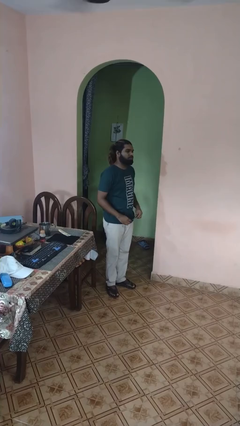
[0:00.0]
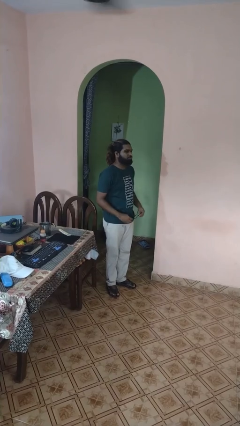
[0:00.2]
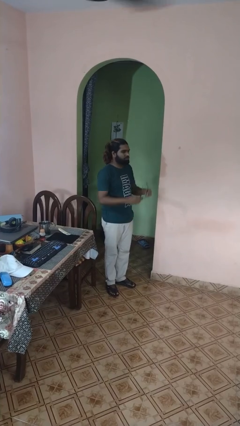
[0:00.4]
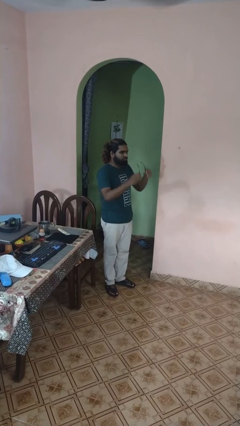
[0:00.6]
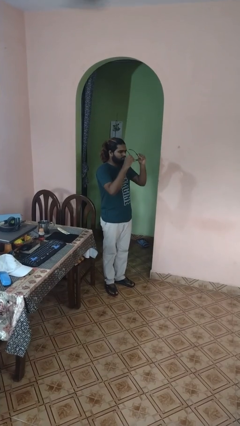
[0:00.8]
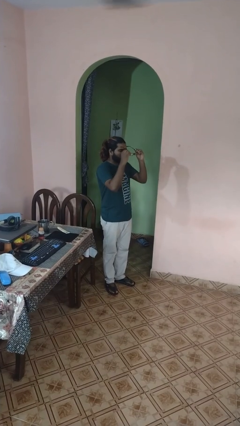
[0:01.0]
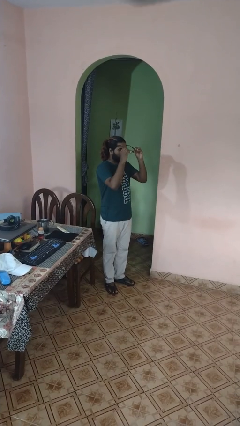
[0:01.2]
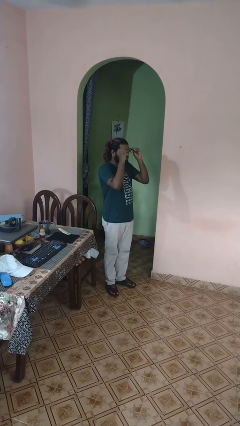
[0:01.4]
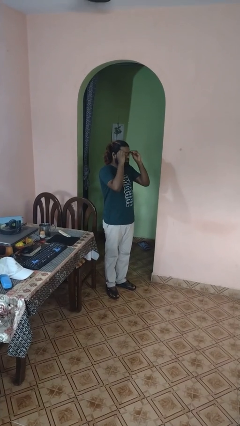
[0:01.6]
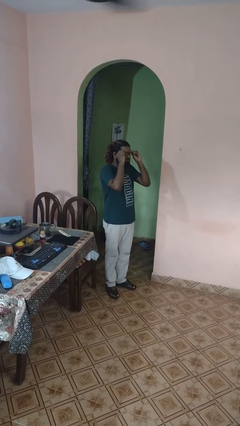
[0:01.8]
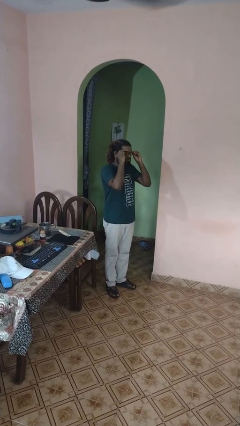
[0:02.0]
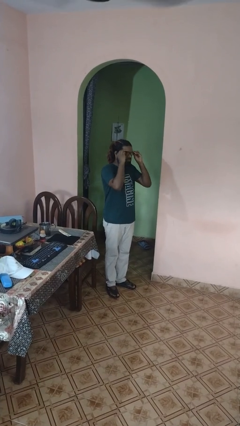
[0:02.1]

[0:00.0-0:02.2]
person puts on glasses

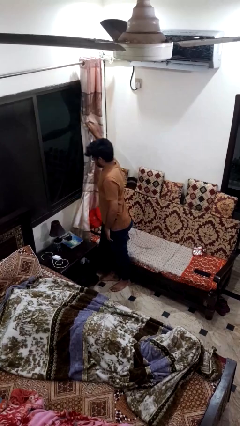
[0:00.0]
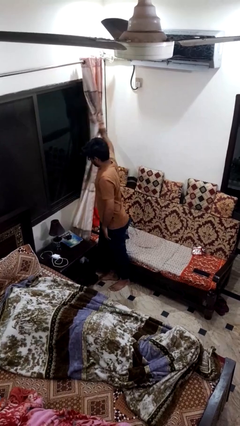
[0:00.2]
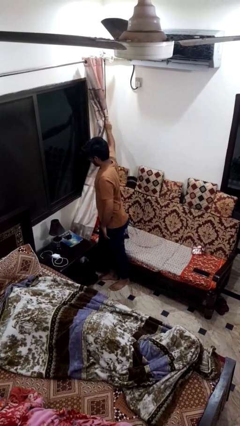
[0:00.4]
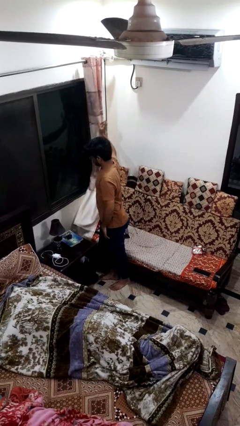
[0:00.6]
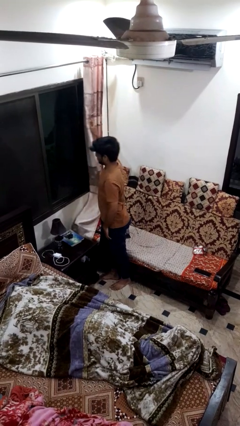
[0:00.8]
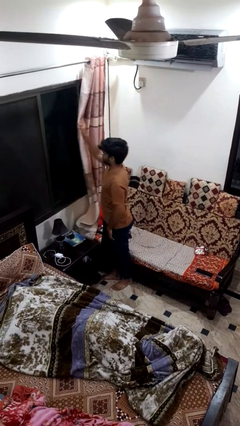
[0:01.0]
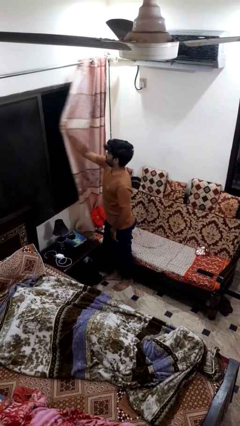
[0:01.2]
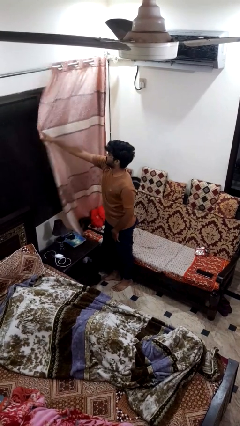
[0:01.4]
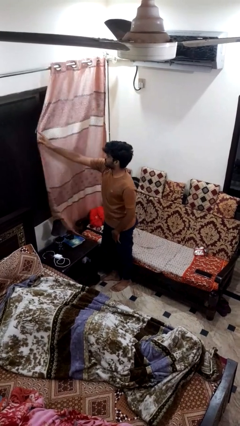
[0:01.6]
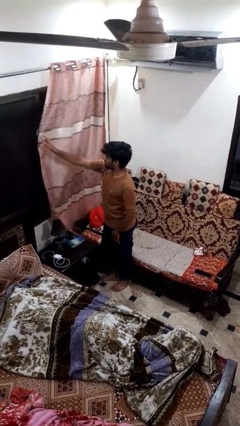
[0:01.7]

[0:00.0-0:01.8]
person closes curtains

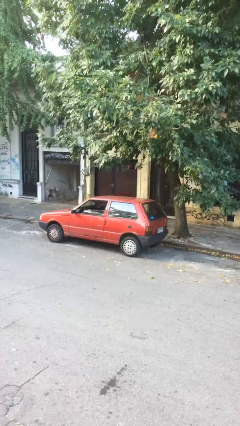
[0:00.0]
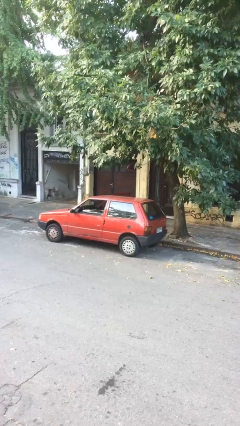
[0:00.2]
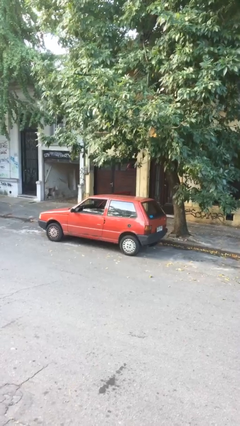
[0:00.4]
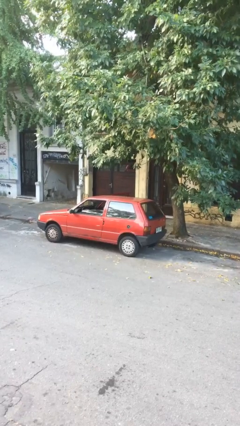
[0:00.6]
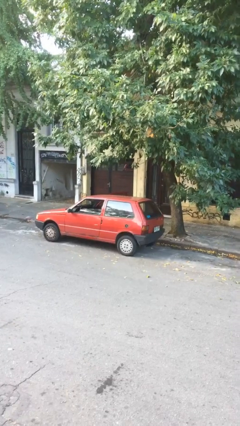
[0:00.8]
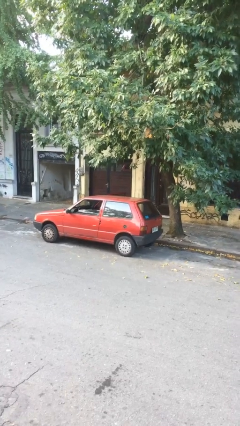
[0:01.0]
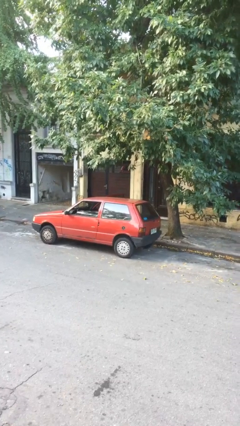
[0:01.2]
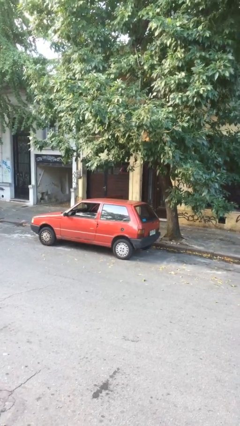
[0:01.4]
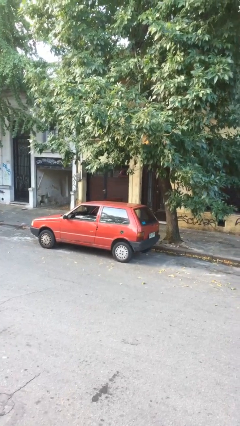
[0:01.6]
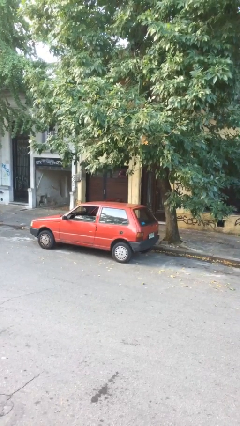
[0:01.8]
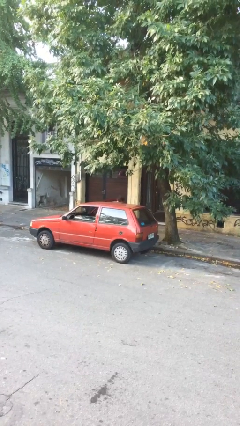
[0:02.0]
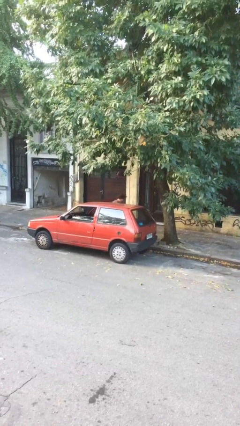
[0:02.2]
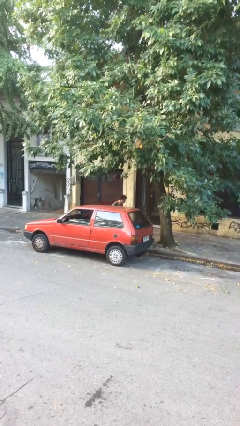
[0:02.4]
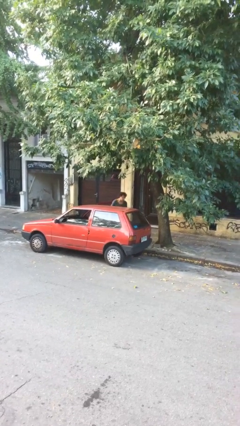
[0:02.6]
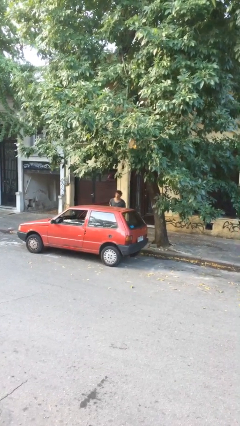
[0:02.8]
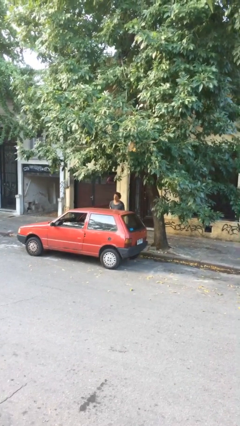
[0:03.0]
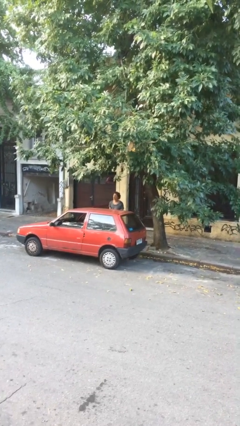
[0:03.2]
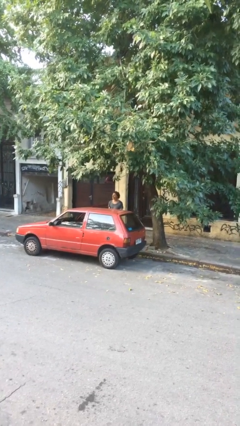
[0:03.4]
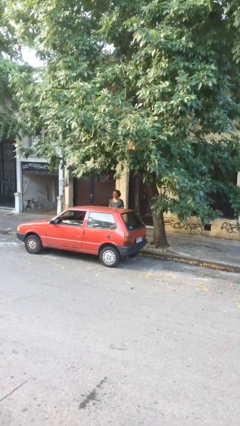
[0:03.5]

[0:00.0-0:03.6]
person exits car

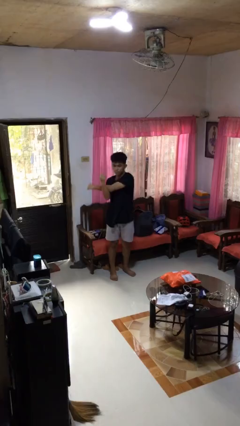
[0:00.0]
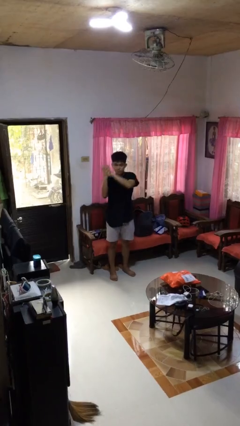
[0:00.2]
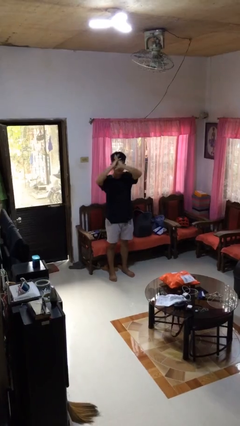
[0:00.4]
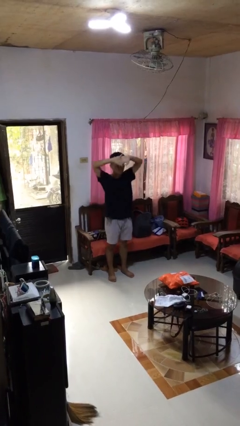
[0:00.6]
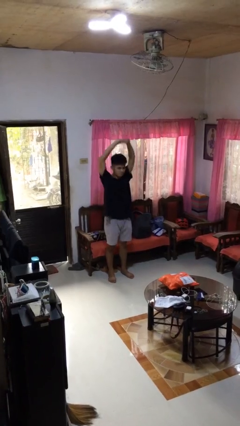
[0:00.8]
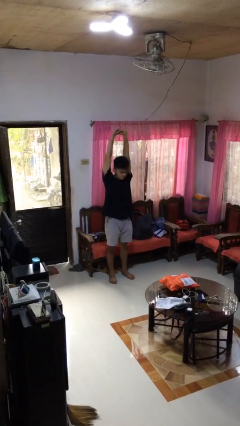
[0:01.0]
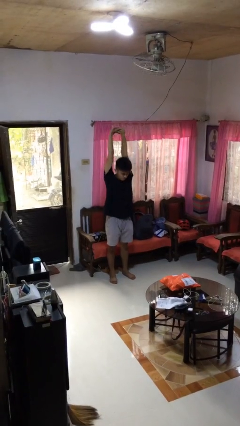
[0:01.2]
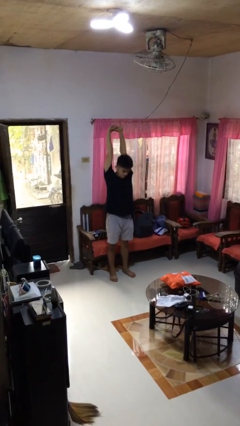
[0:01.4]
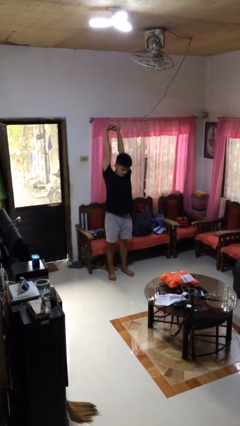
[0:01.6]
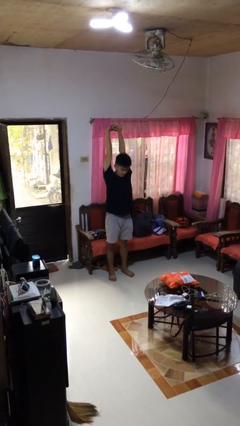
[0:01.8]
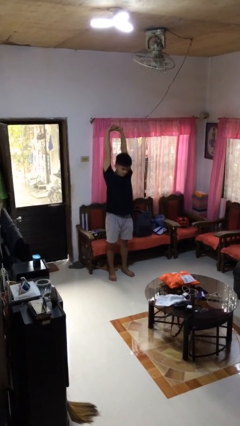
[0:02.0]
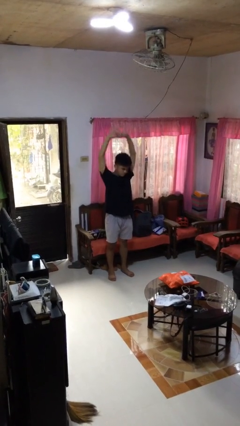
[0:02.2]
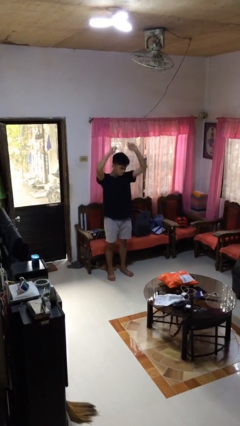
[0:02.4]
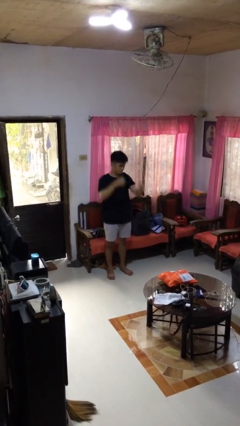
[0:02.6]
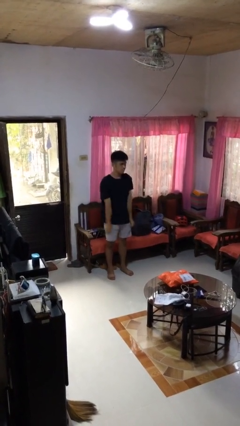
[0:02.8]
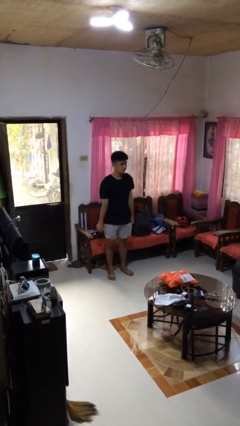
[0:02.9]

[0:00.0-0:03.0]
person stretches arms over head

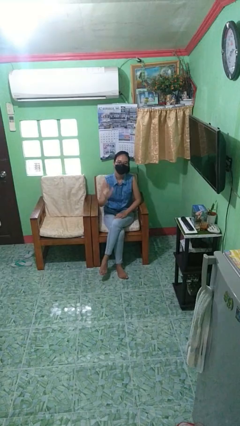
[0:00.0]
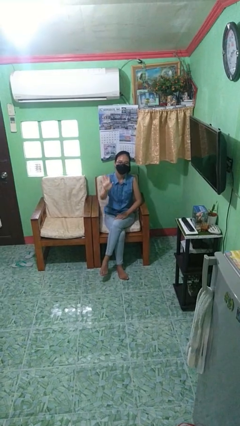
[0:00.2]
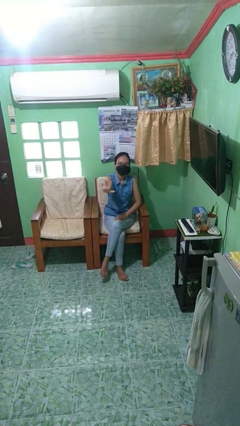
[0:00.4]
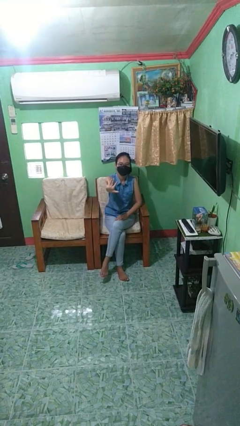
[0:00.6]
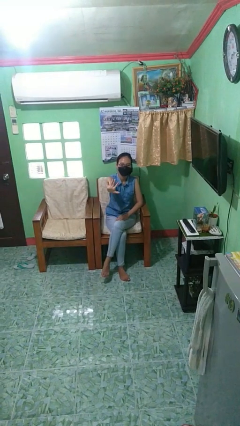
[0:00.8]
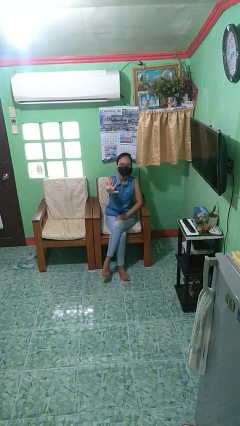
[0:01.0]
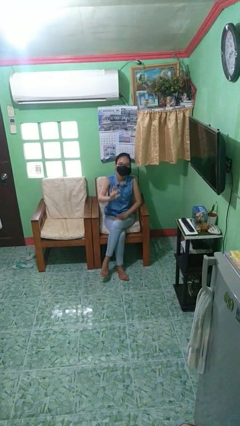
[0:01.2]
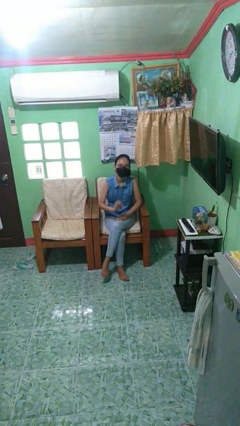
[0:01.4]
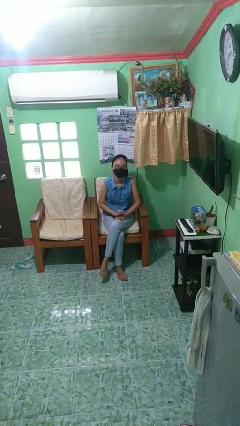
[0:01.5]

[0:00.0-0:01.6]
person gestures stop

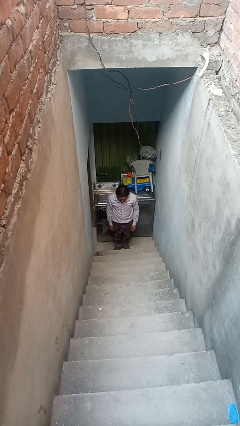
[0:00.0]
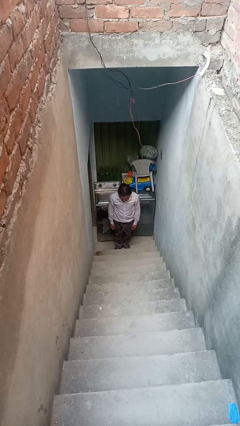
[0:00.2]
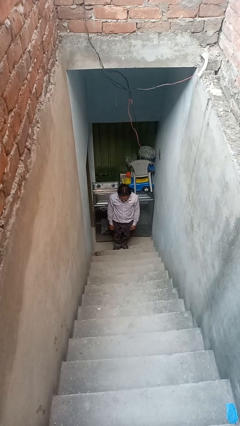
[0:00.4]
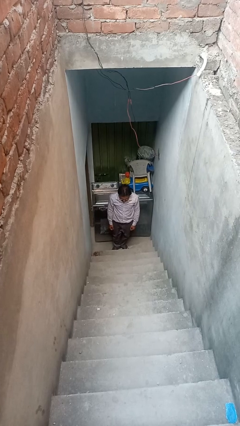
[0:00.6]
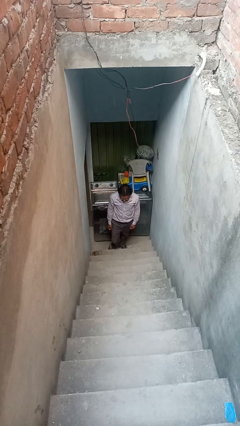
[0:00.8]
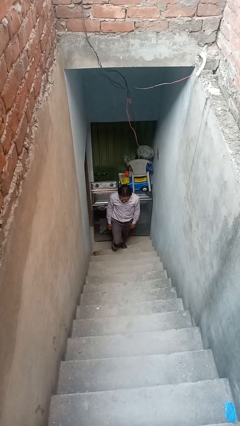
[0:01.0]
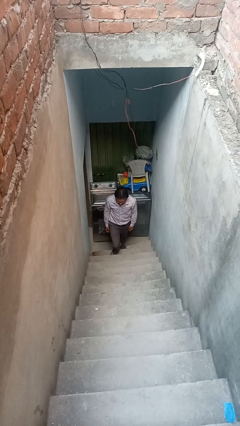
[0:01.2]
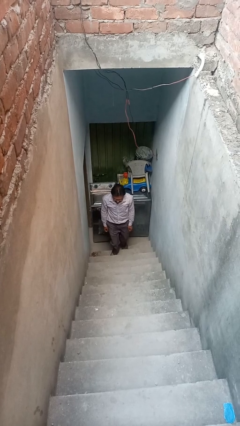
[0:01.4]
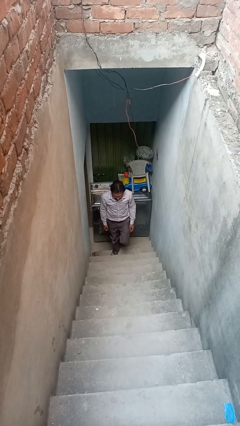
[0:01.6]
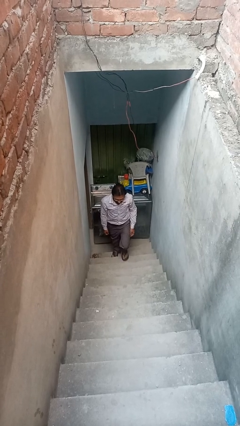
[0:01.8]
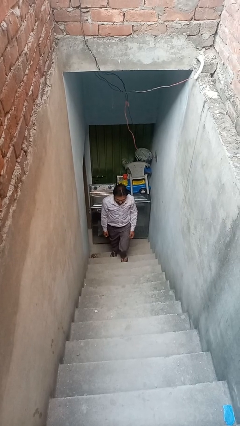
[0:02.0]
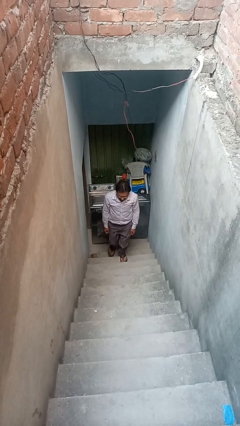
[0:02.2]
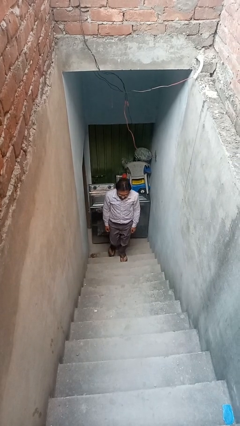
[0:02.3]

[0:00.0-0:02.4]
person climbs up stairs

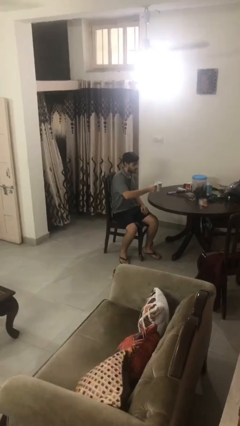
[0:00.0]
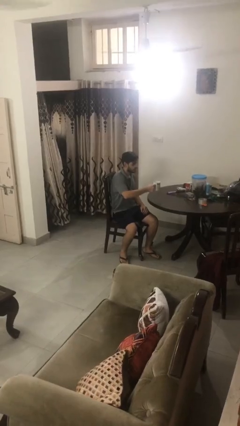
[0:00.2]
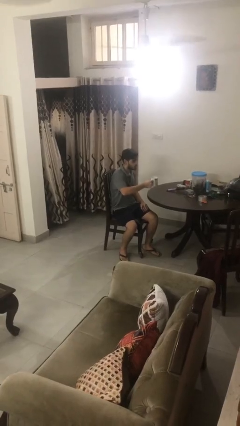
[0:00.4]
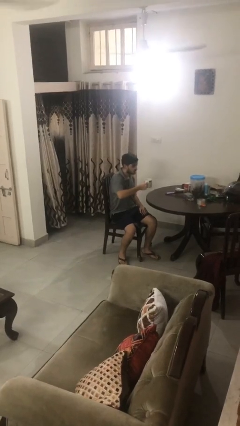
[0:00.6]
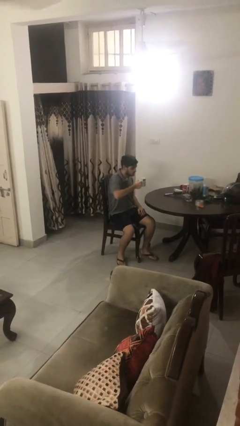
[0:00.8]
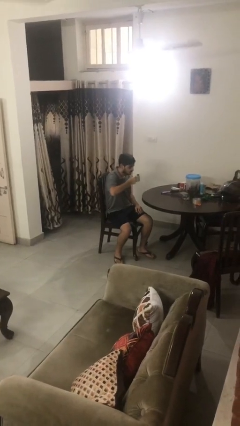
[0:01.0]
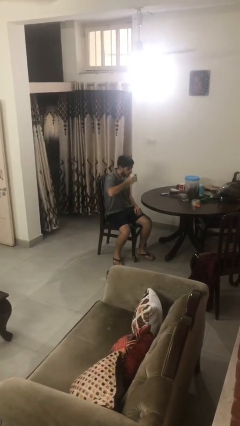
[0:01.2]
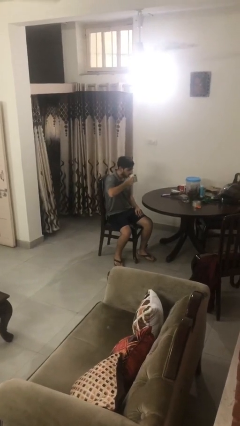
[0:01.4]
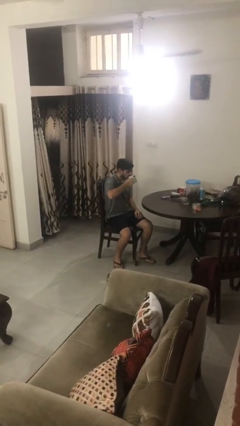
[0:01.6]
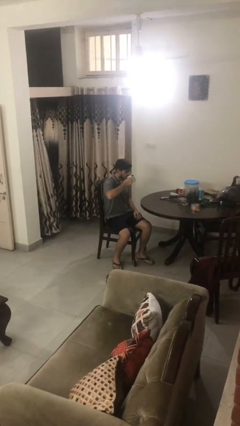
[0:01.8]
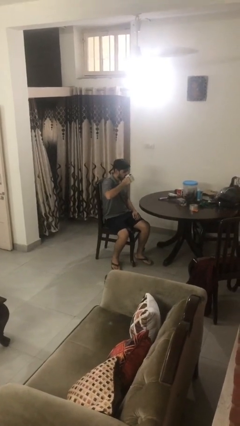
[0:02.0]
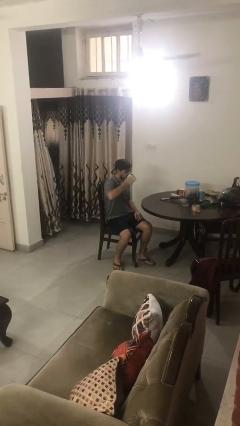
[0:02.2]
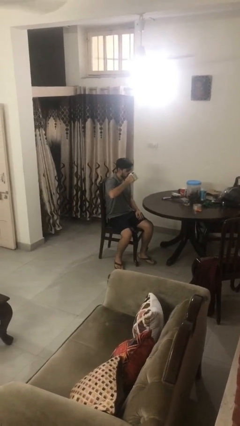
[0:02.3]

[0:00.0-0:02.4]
person drinks from mug
